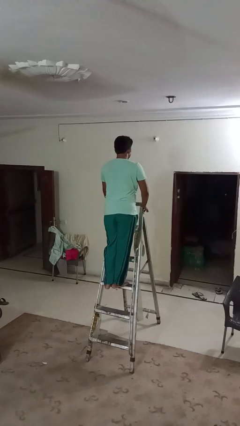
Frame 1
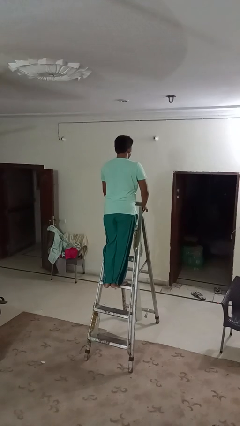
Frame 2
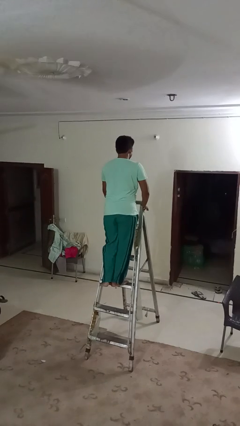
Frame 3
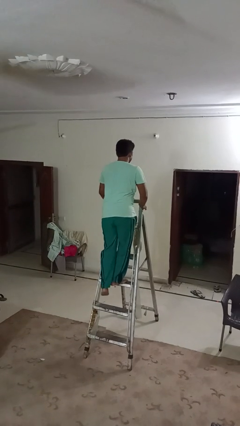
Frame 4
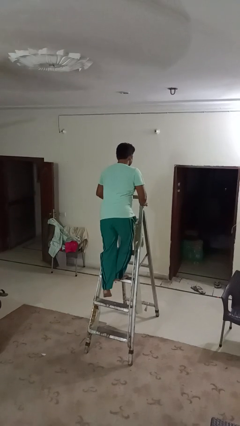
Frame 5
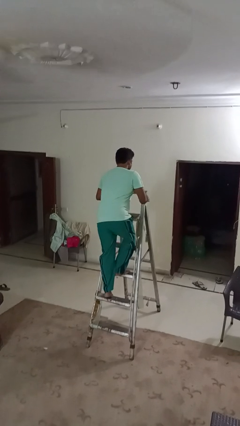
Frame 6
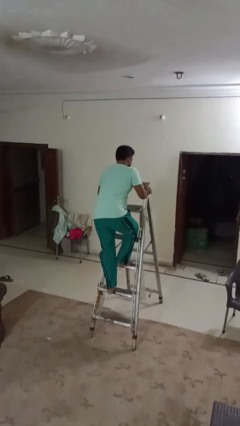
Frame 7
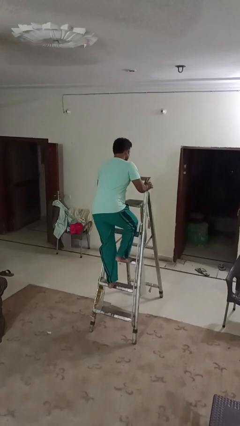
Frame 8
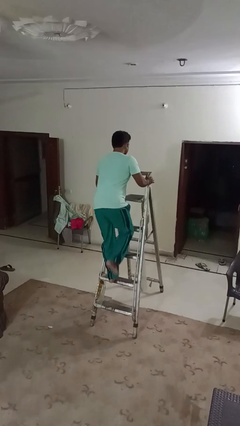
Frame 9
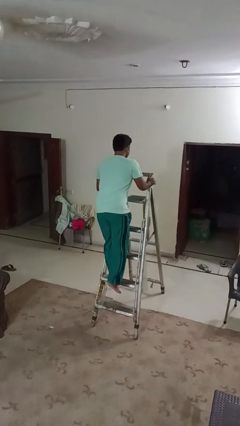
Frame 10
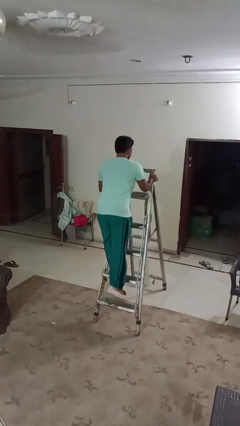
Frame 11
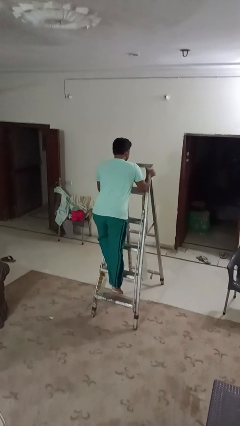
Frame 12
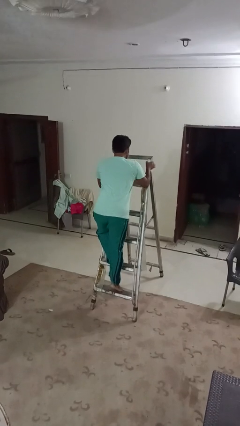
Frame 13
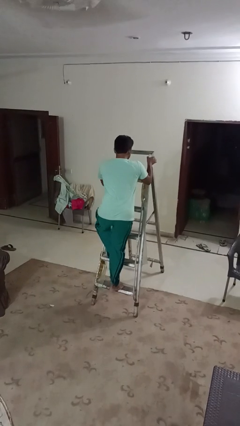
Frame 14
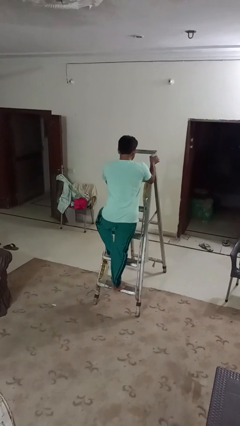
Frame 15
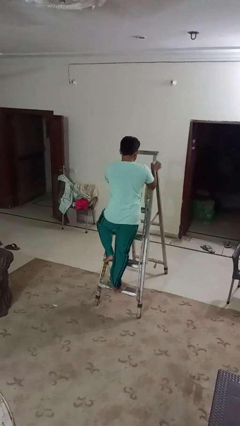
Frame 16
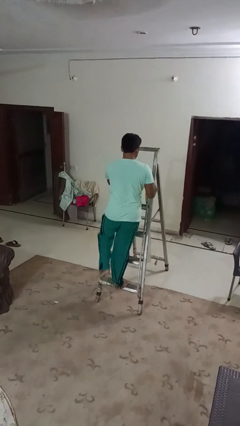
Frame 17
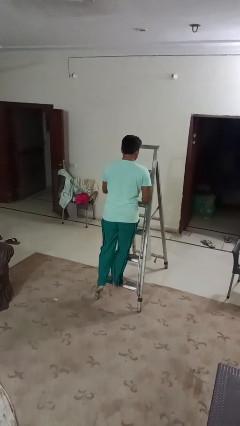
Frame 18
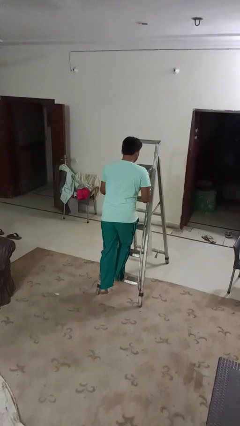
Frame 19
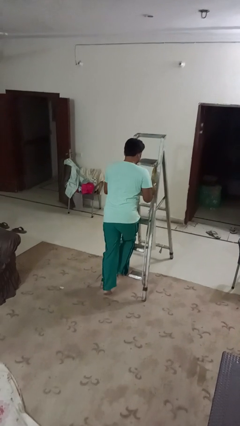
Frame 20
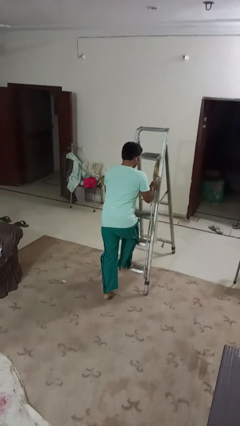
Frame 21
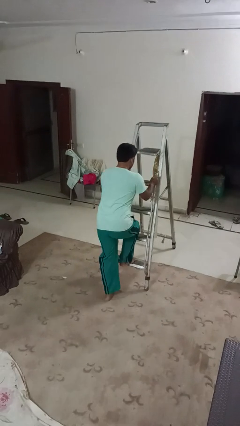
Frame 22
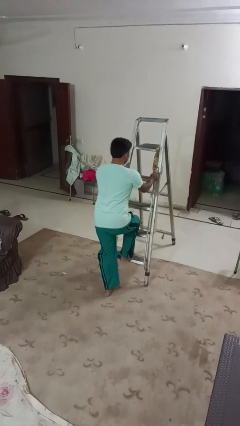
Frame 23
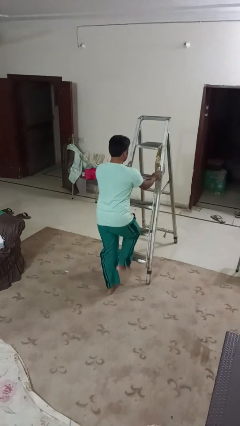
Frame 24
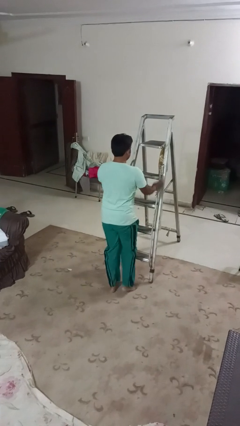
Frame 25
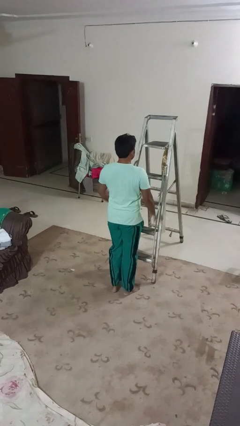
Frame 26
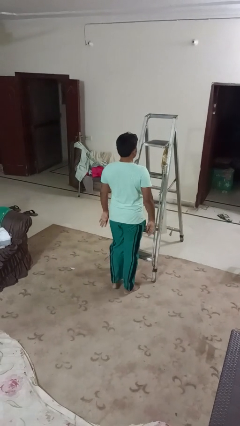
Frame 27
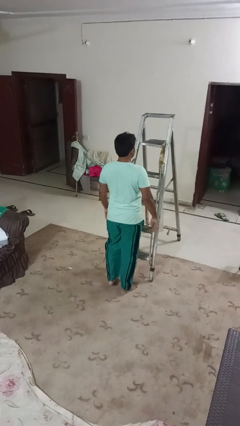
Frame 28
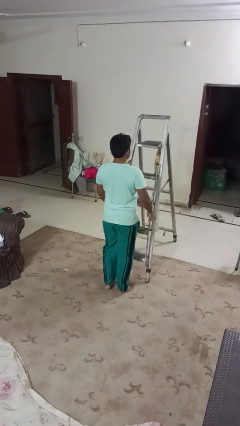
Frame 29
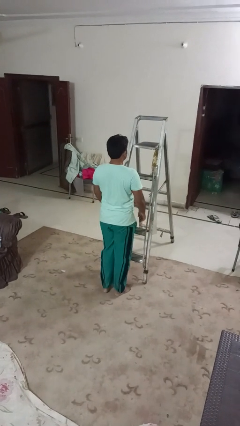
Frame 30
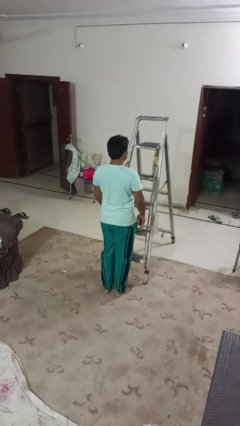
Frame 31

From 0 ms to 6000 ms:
person climbs down ladder

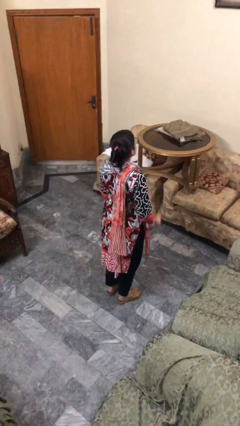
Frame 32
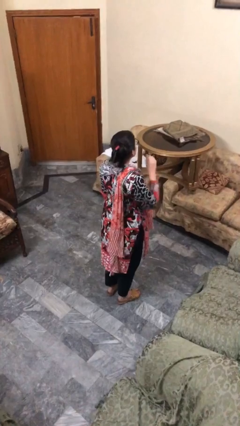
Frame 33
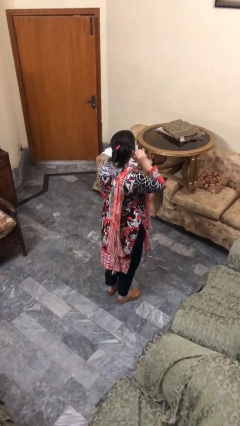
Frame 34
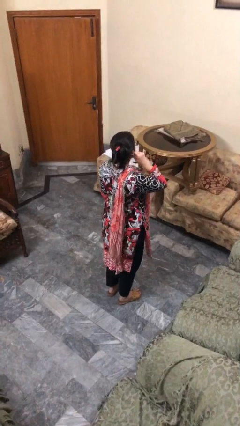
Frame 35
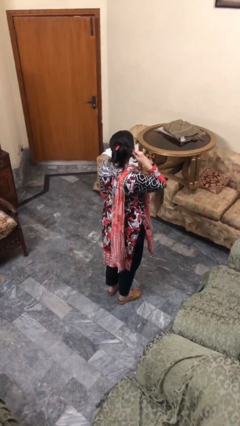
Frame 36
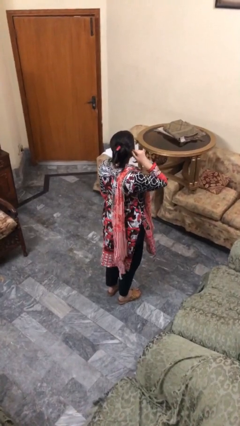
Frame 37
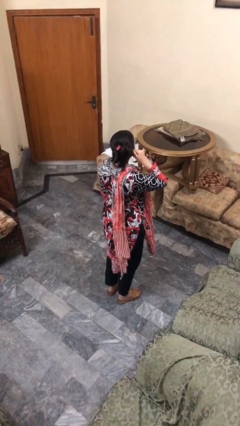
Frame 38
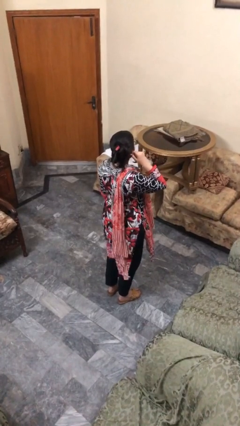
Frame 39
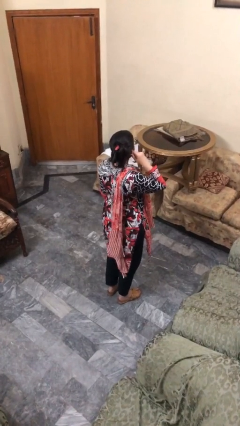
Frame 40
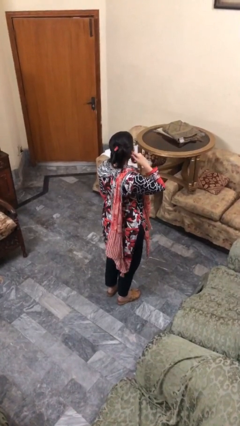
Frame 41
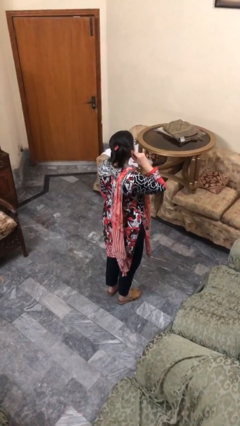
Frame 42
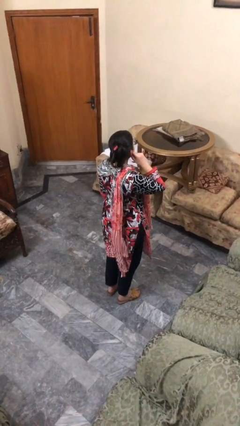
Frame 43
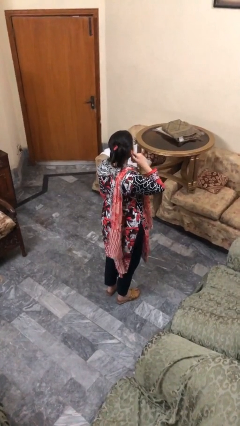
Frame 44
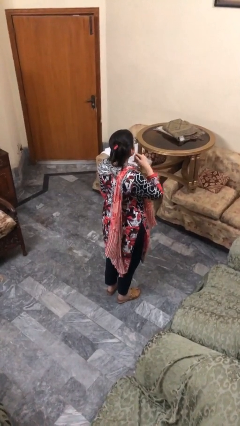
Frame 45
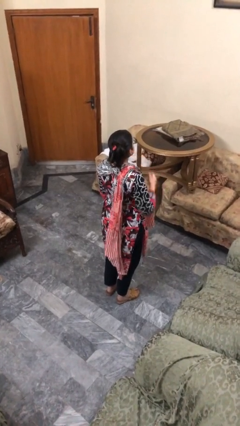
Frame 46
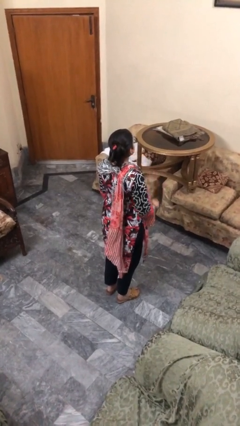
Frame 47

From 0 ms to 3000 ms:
person touches earlobe

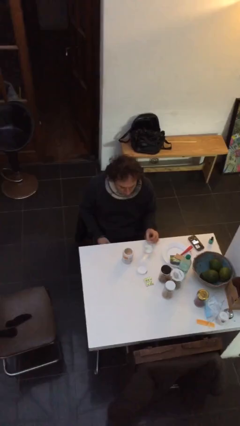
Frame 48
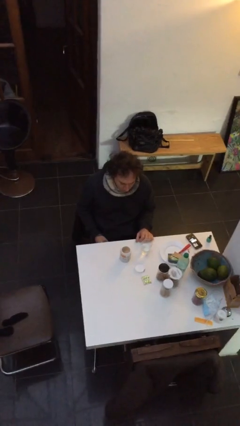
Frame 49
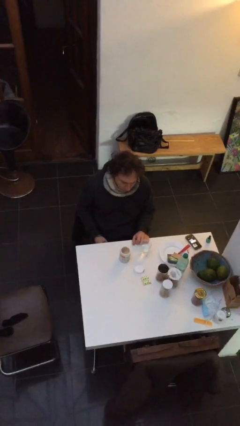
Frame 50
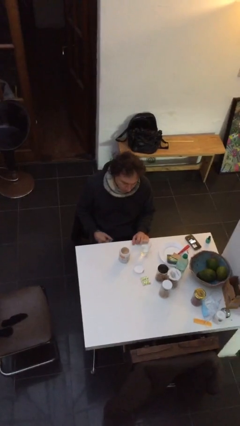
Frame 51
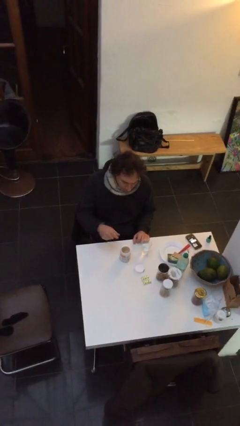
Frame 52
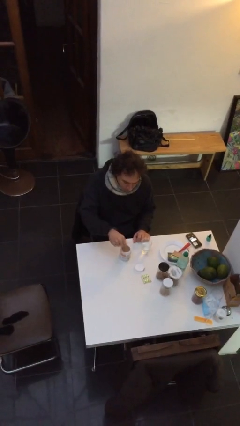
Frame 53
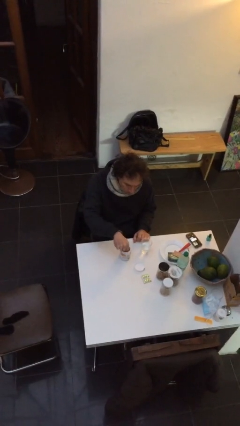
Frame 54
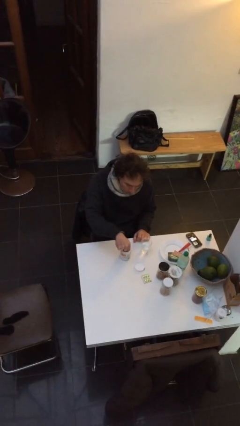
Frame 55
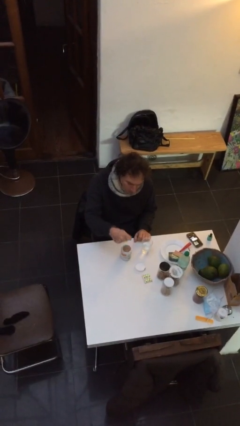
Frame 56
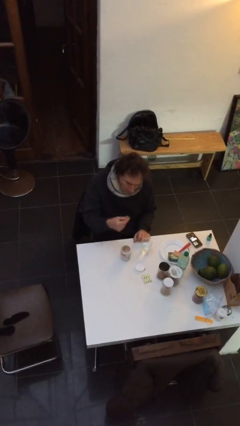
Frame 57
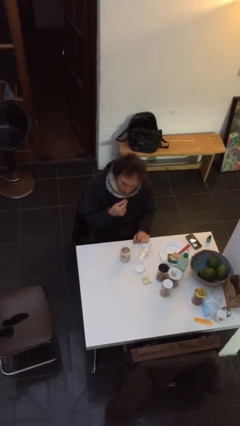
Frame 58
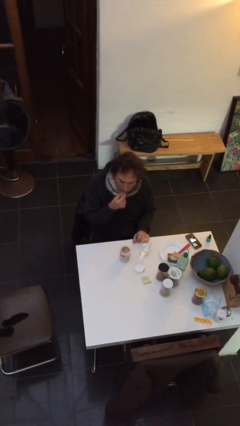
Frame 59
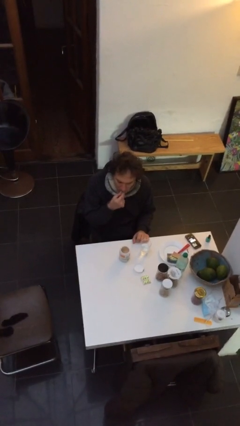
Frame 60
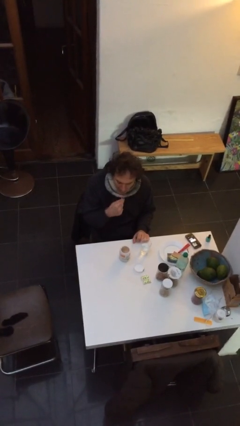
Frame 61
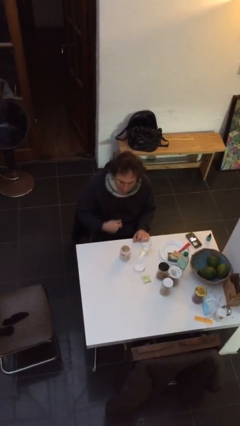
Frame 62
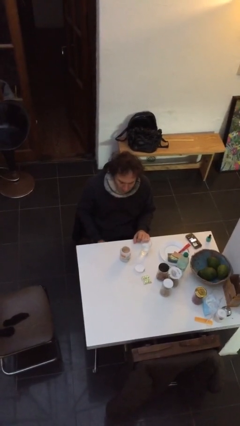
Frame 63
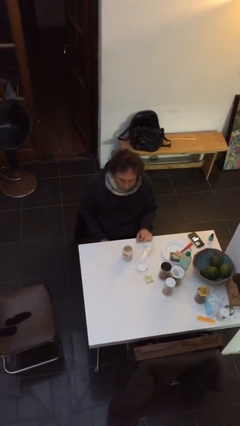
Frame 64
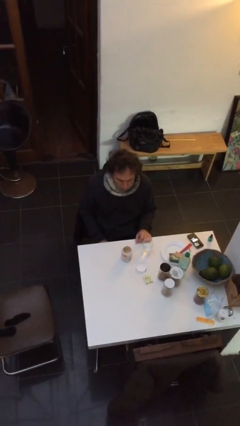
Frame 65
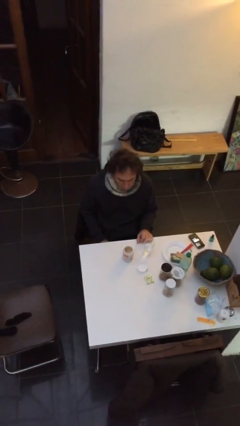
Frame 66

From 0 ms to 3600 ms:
person takes medicine pills

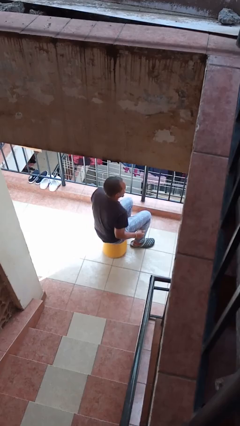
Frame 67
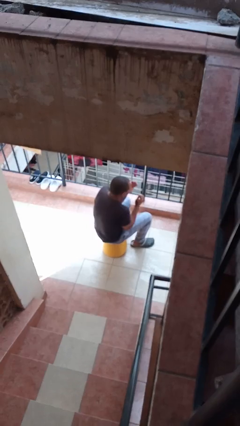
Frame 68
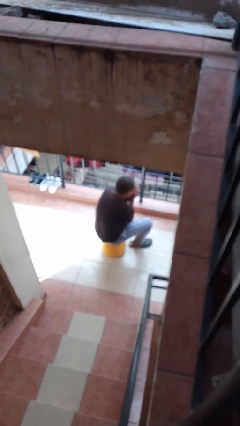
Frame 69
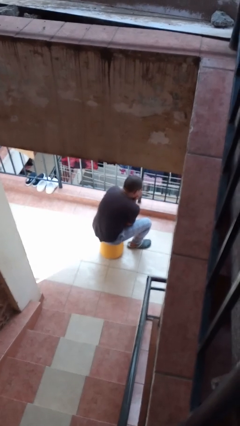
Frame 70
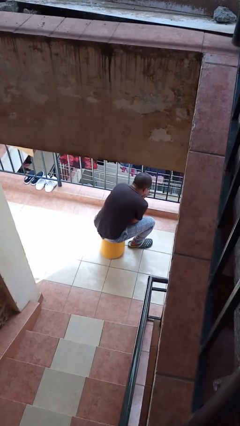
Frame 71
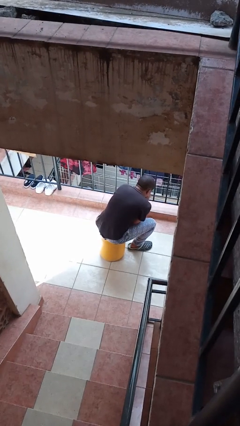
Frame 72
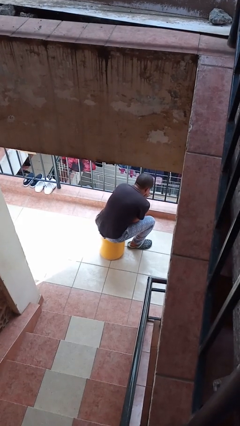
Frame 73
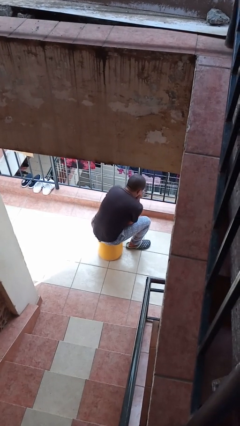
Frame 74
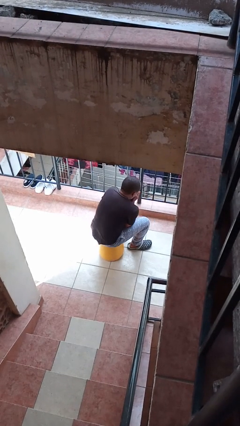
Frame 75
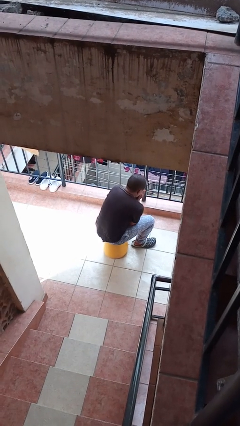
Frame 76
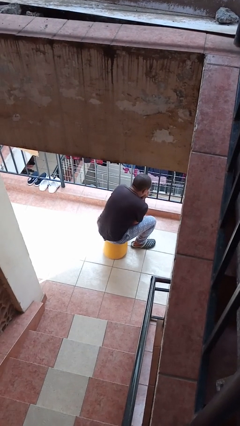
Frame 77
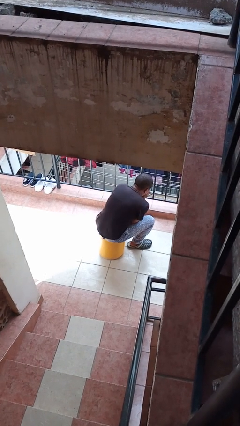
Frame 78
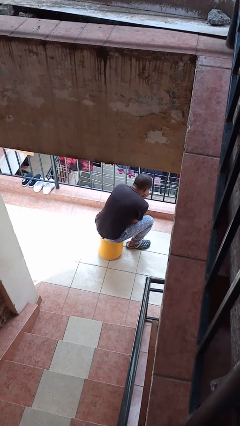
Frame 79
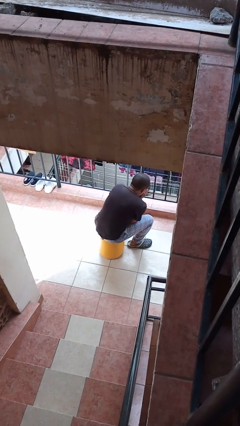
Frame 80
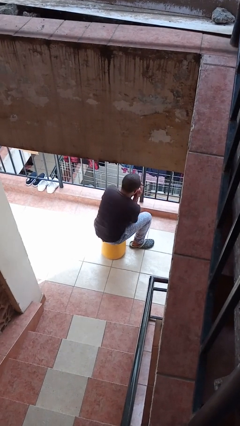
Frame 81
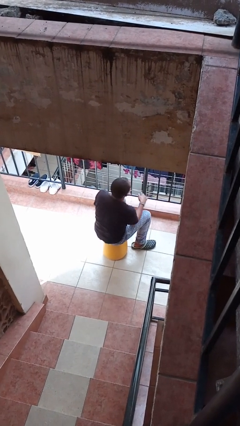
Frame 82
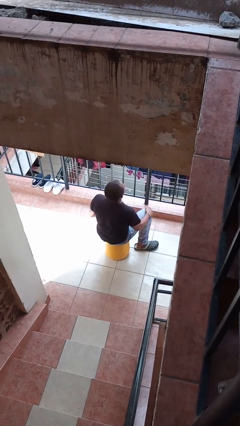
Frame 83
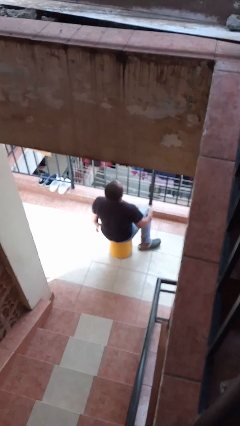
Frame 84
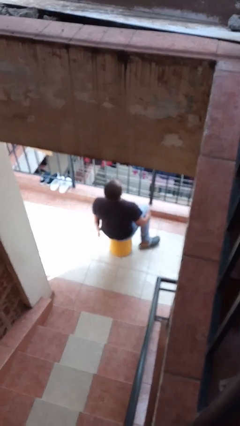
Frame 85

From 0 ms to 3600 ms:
person blows into hands

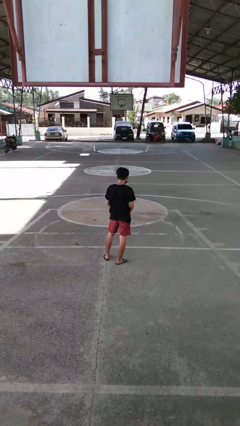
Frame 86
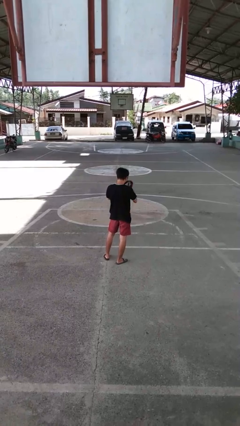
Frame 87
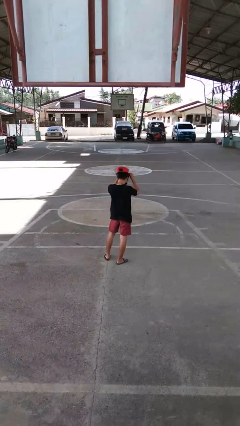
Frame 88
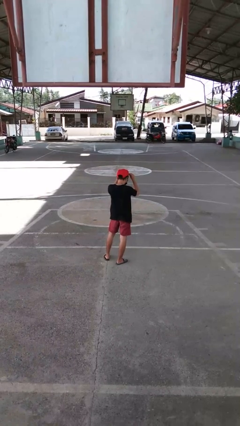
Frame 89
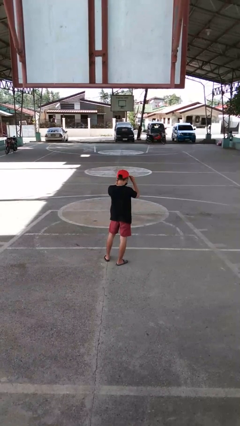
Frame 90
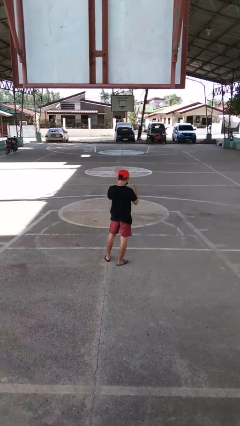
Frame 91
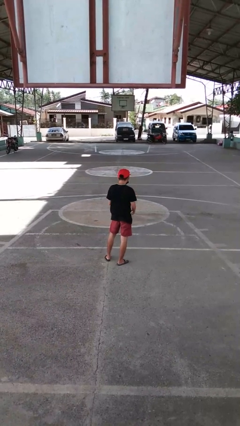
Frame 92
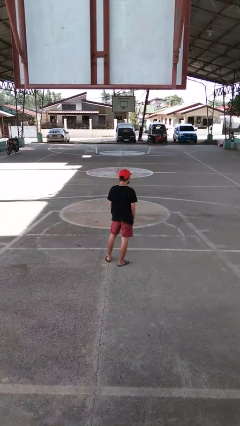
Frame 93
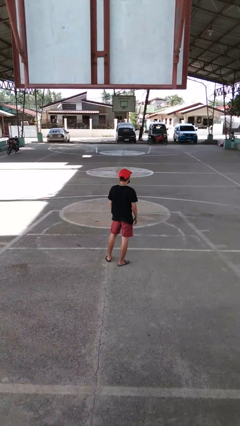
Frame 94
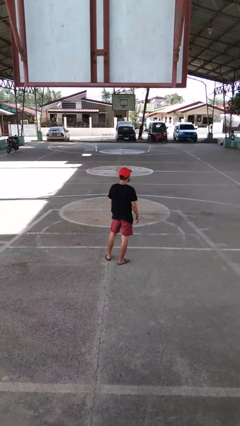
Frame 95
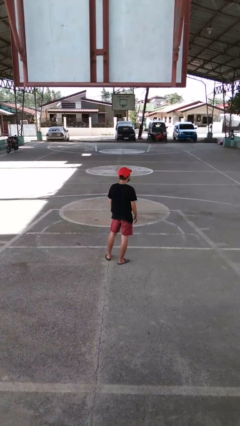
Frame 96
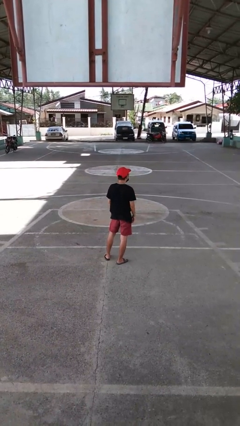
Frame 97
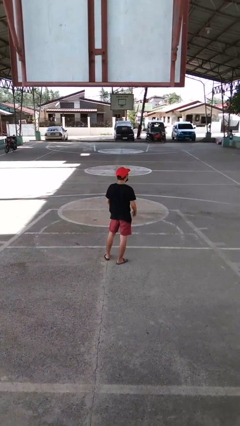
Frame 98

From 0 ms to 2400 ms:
person puts on hat
